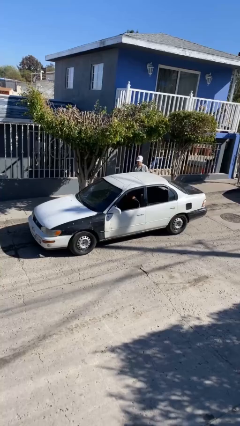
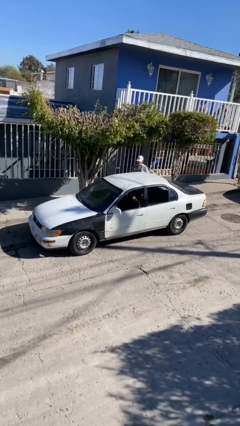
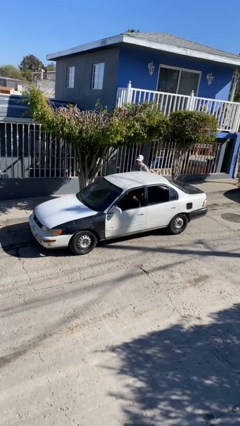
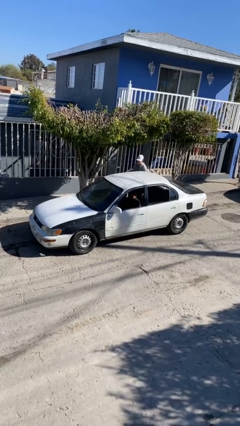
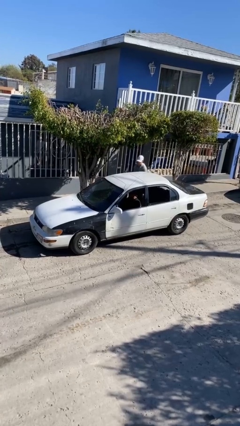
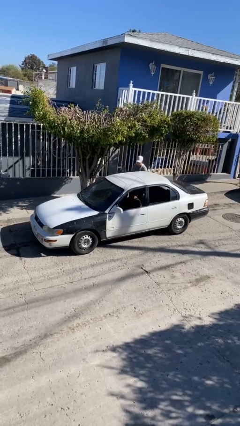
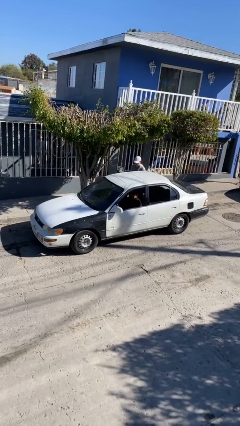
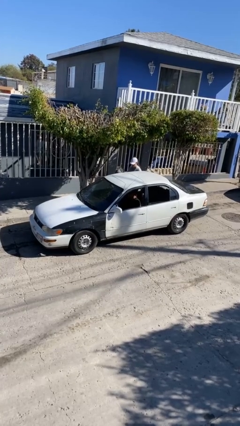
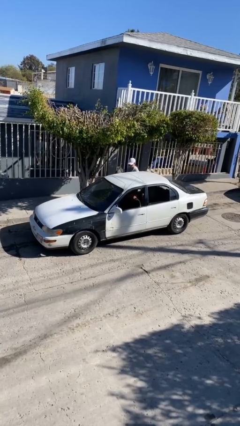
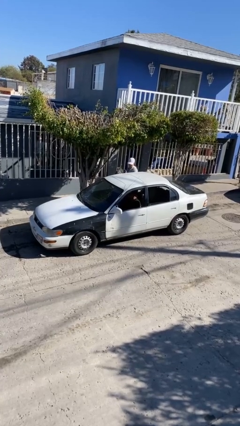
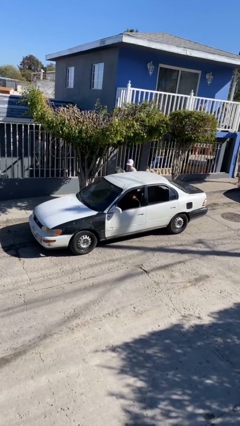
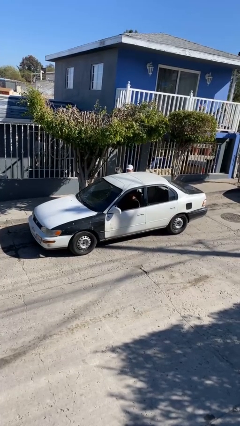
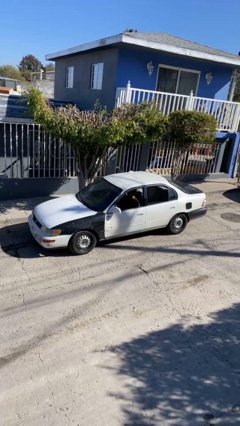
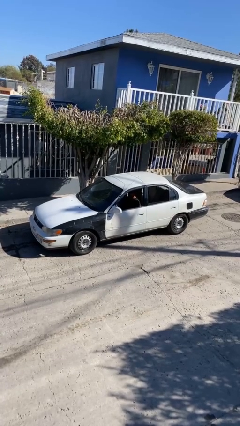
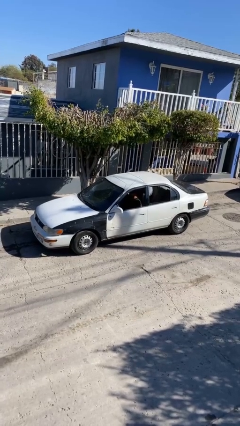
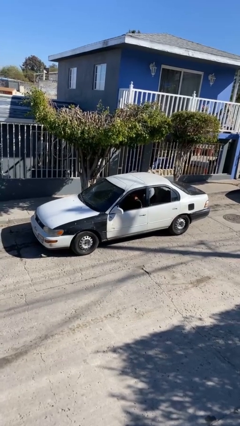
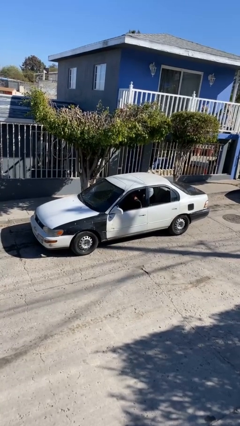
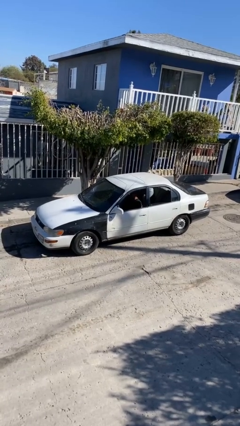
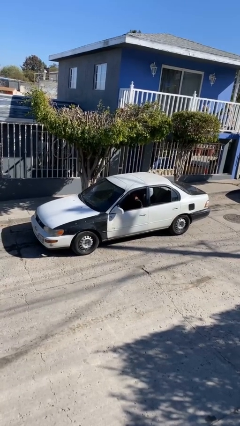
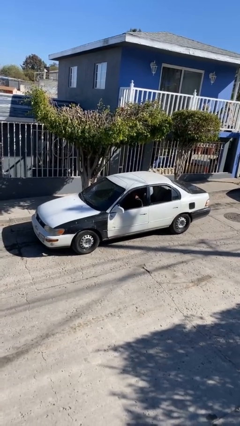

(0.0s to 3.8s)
car picks up person

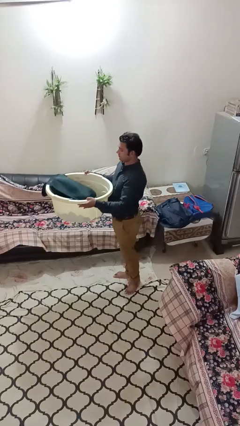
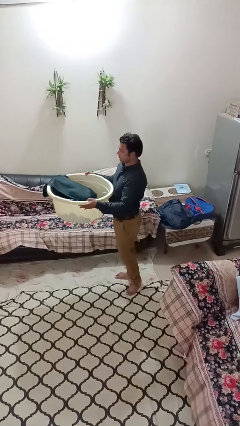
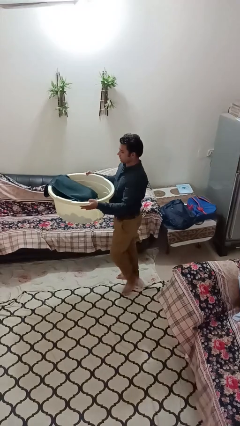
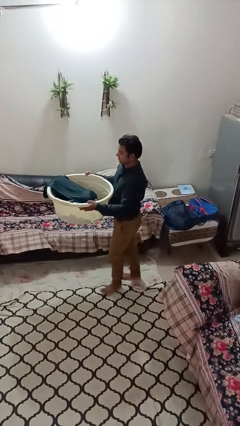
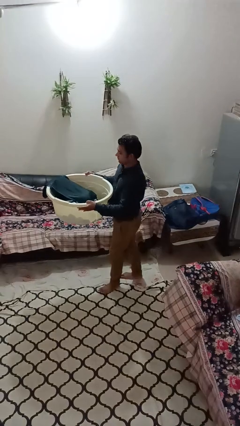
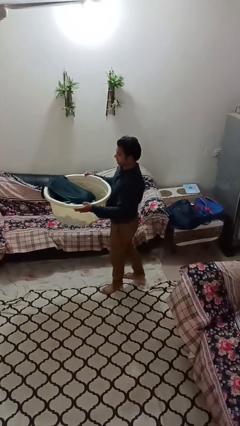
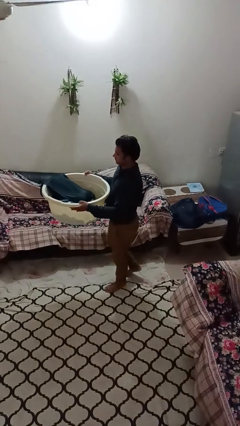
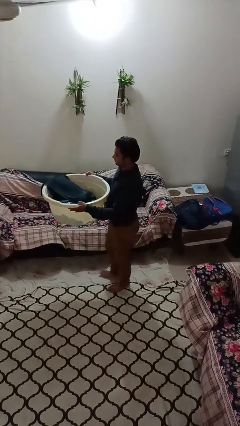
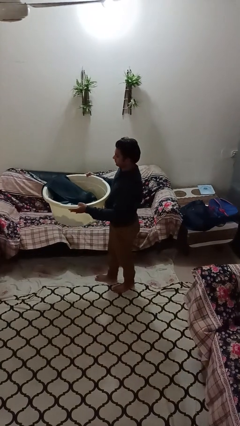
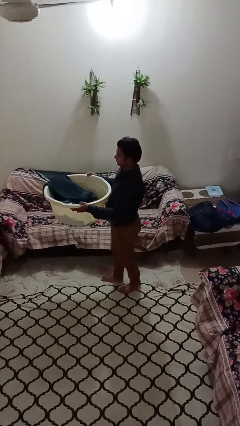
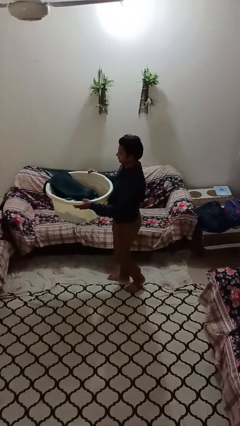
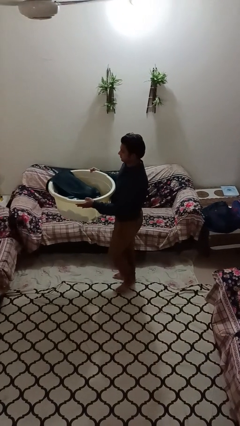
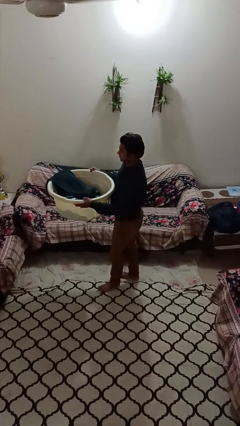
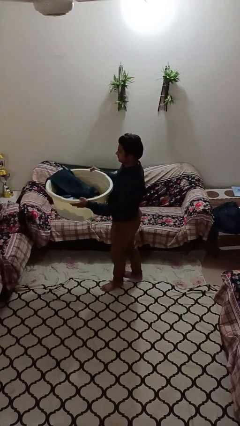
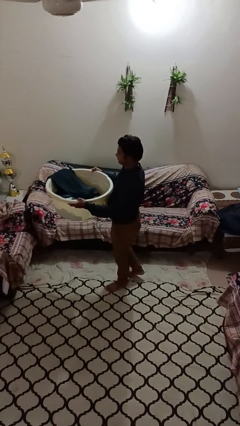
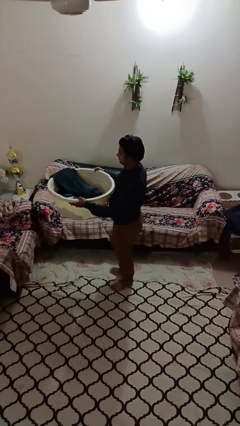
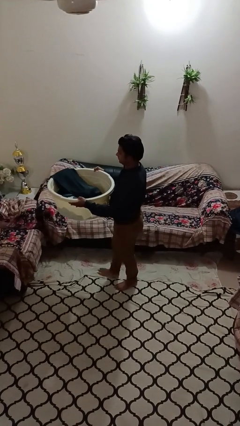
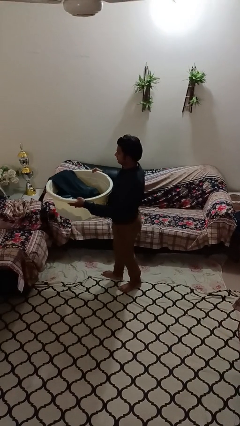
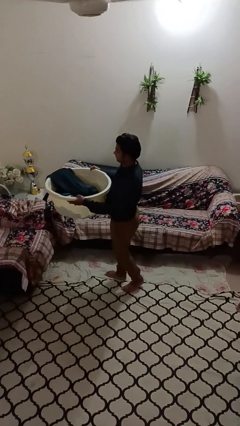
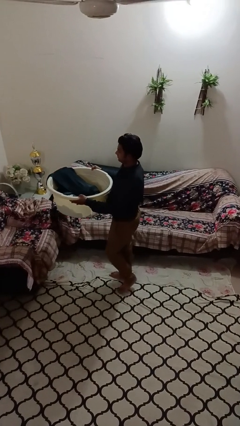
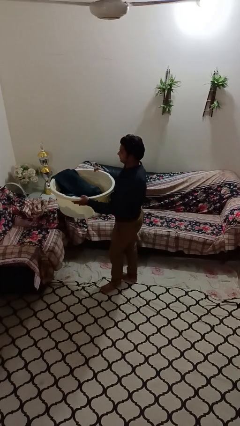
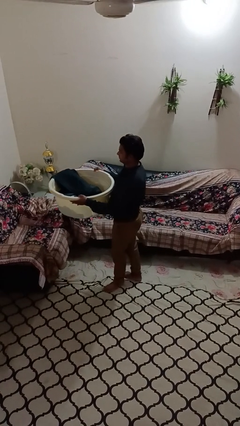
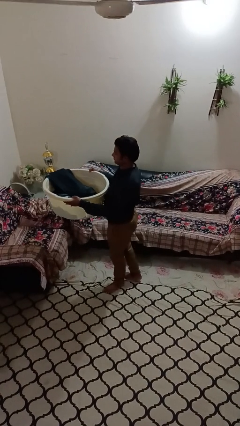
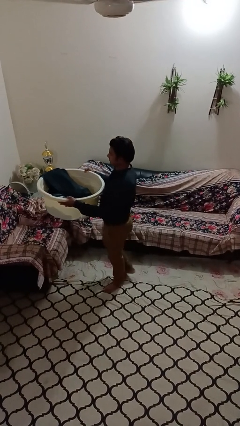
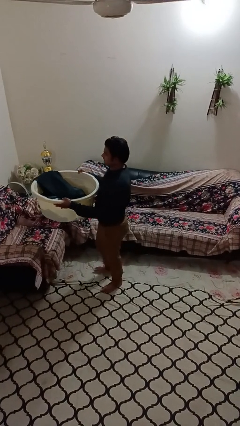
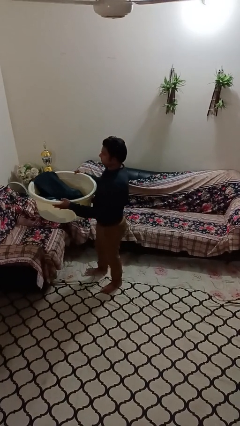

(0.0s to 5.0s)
person carries laundry basket

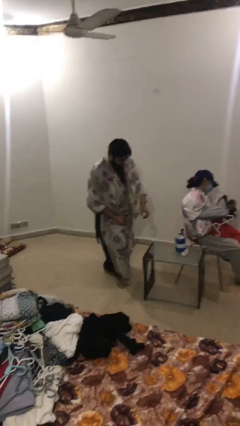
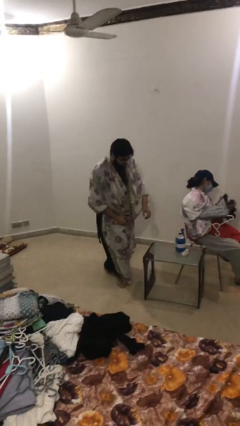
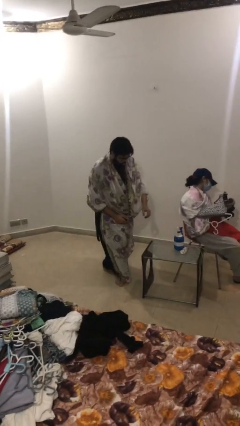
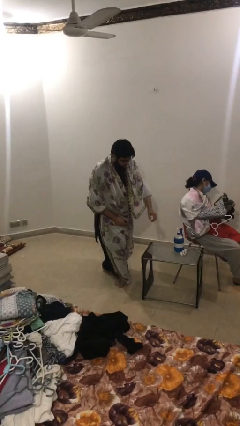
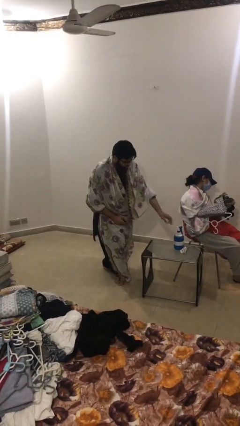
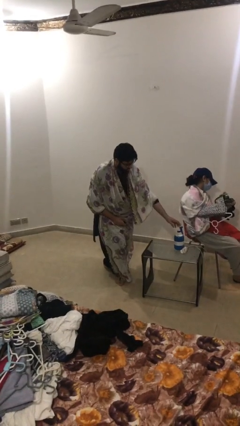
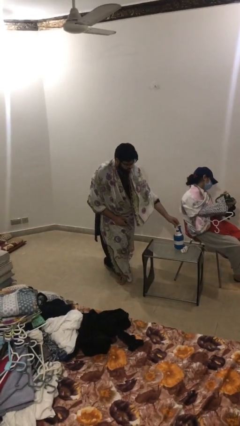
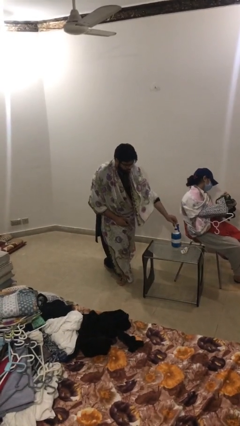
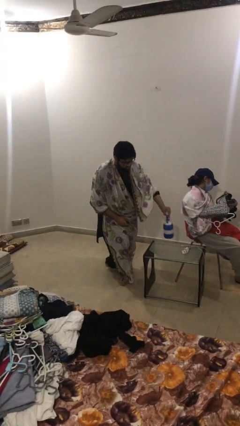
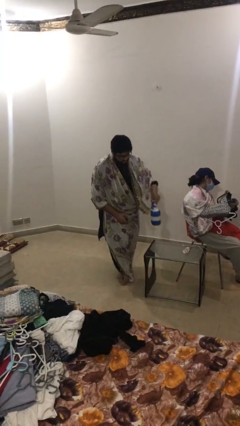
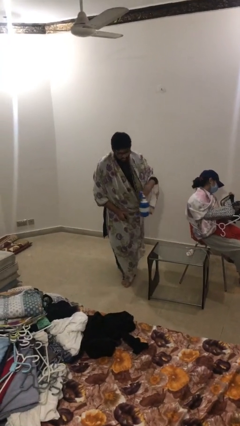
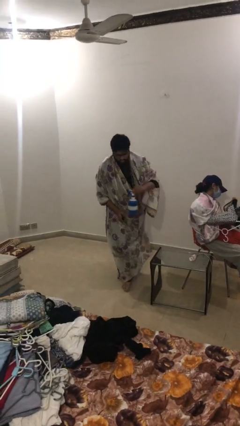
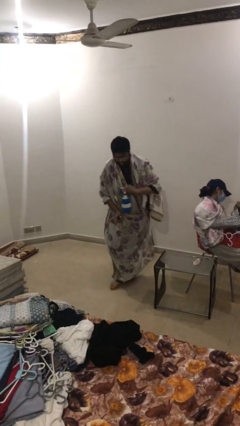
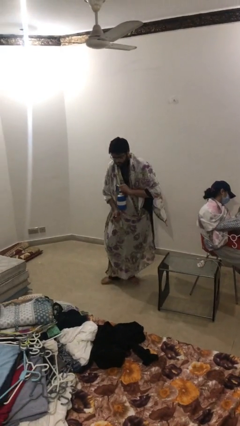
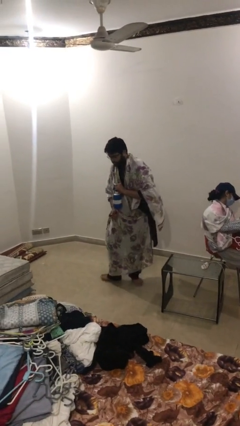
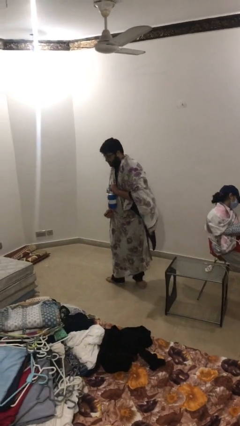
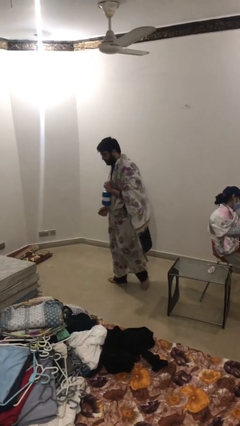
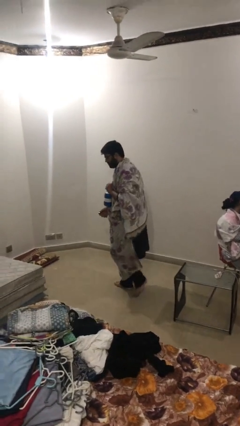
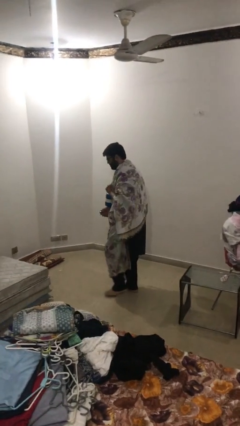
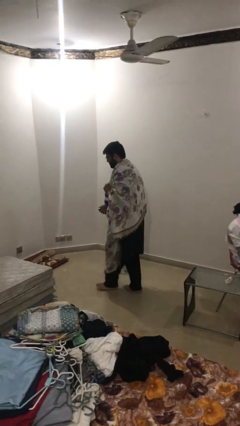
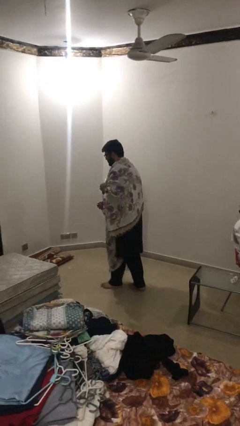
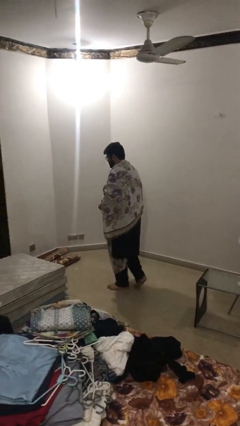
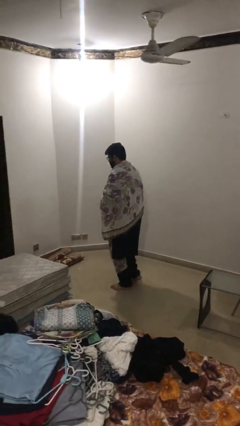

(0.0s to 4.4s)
person steals object from person

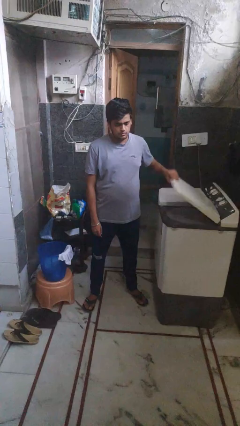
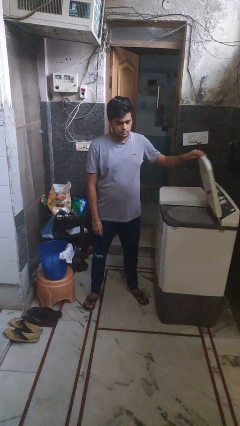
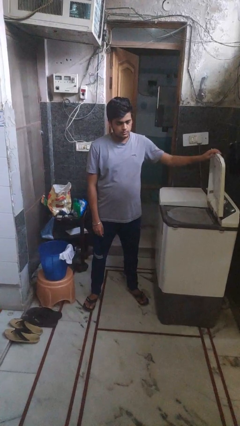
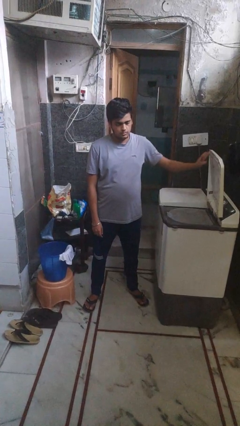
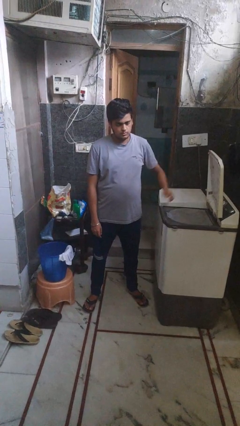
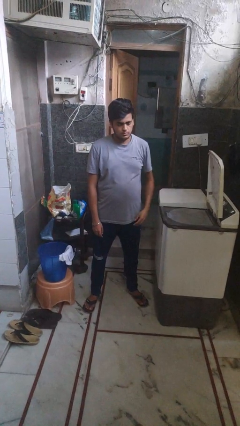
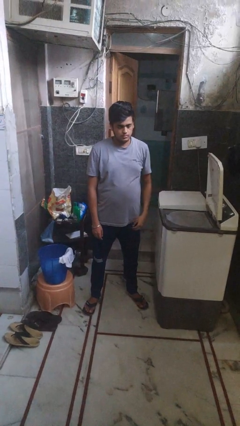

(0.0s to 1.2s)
person opens clothes washer

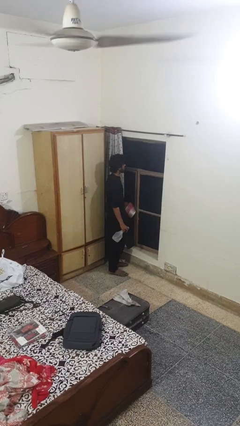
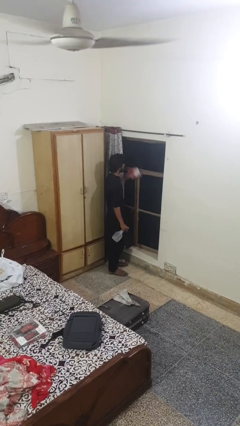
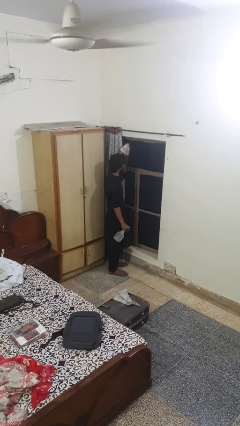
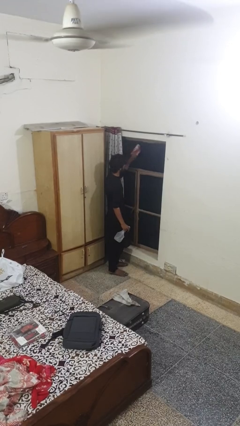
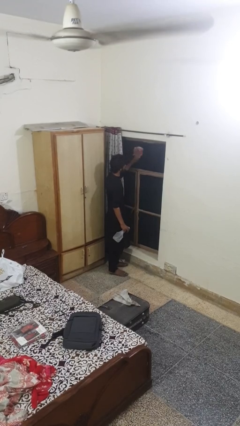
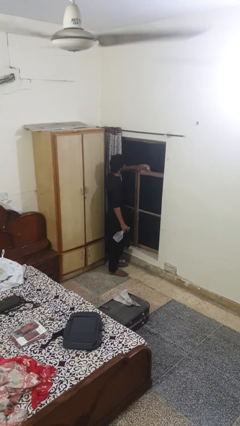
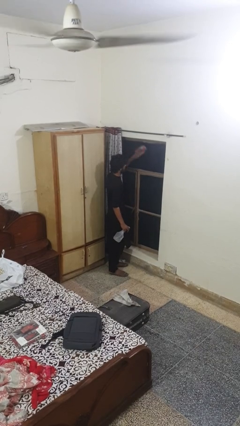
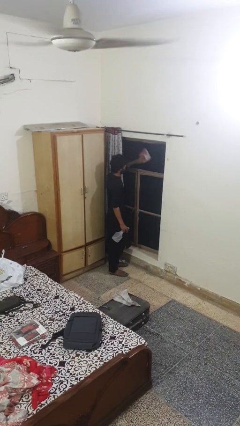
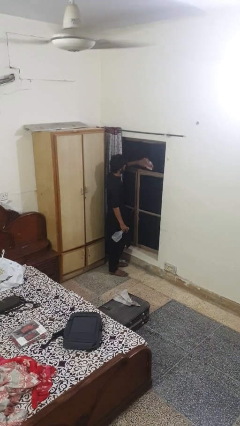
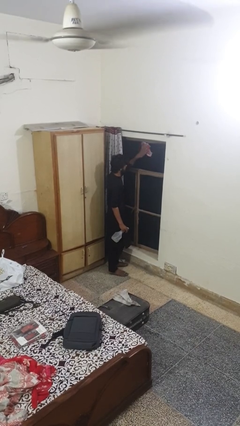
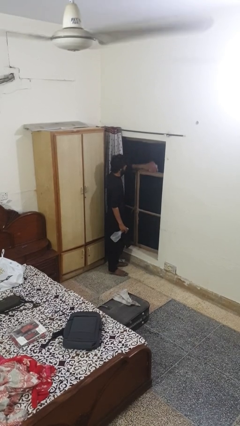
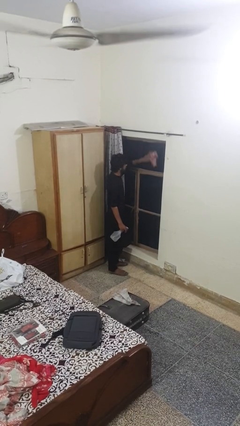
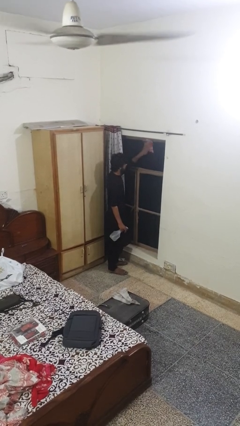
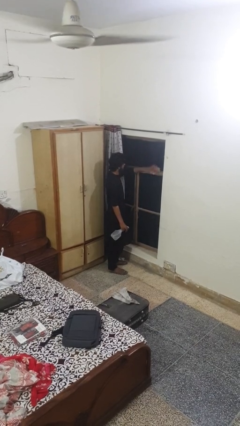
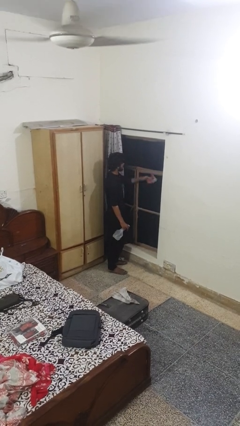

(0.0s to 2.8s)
person washes window

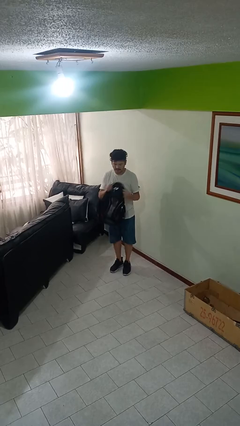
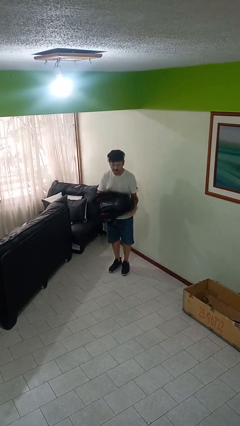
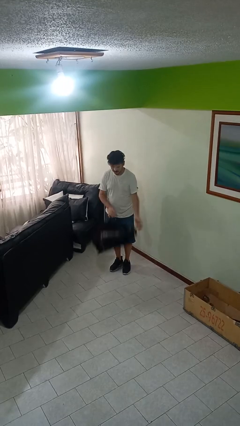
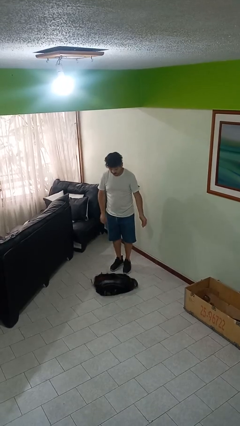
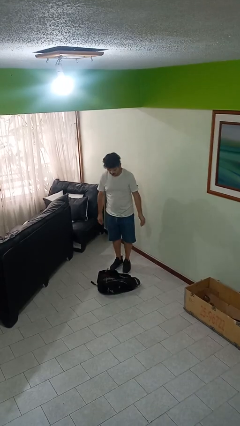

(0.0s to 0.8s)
person drops object
